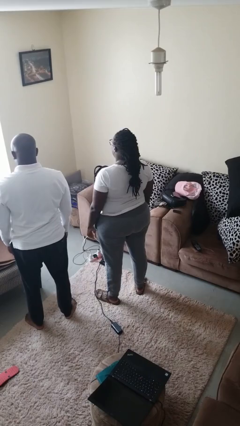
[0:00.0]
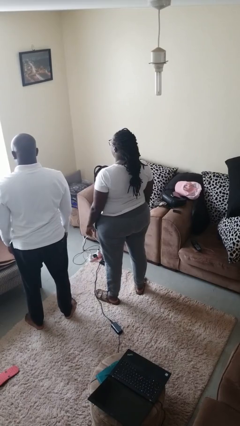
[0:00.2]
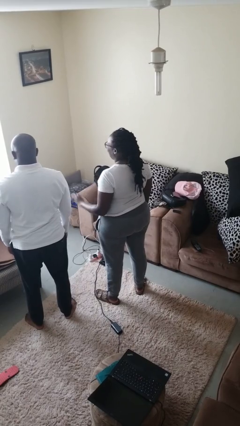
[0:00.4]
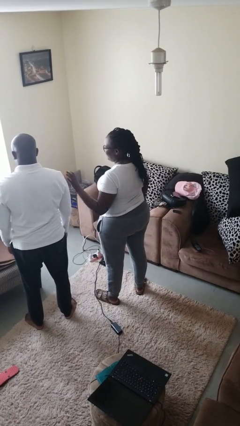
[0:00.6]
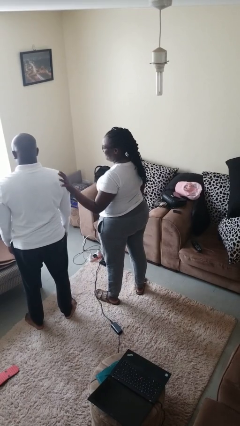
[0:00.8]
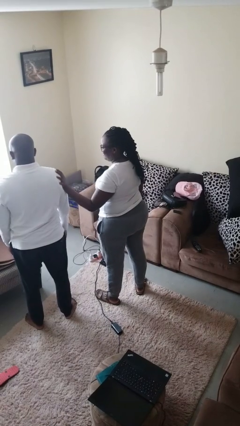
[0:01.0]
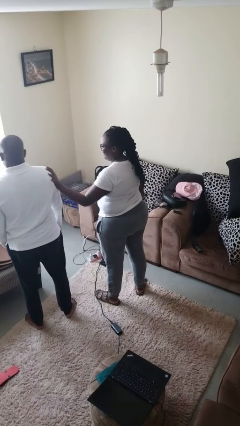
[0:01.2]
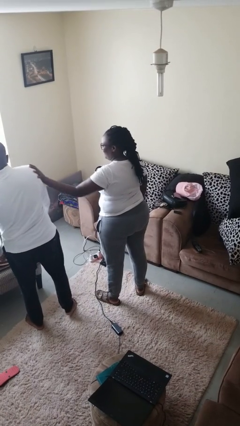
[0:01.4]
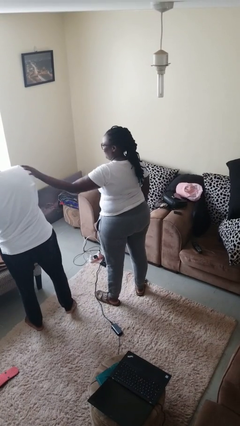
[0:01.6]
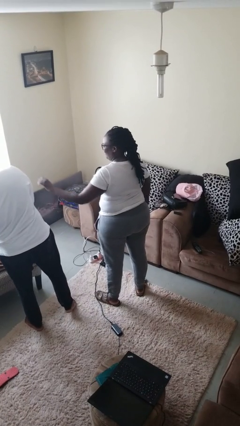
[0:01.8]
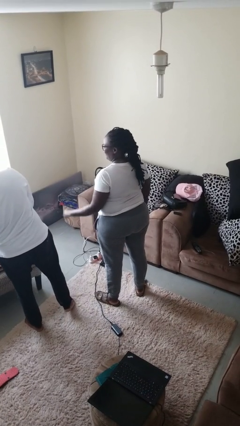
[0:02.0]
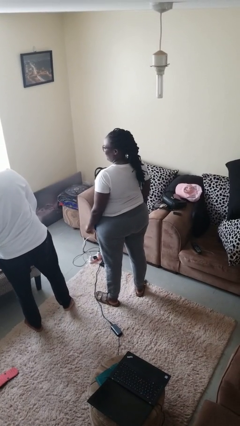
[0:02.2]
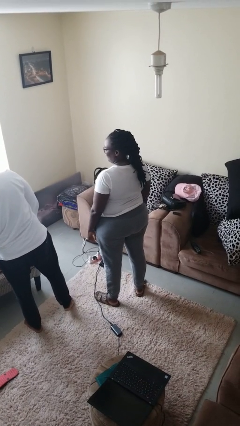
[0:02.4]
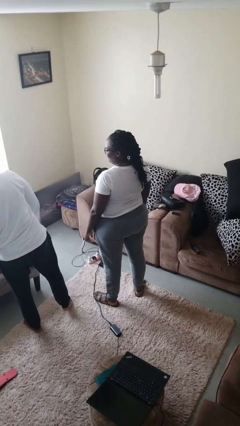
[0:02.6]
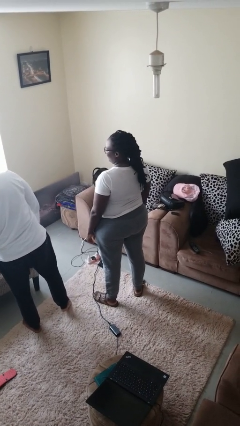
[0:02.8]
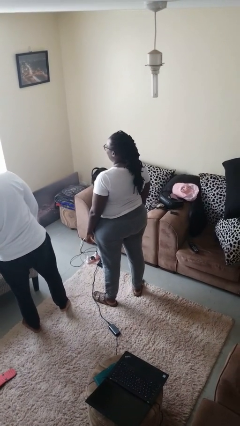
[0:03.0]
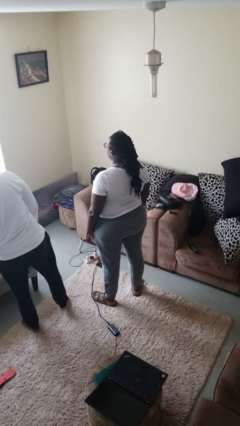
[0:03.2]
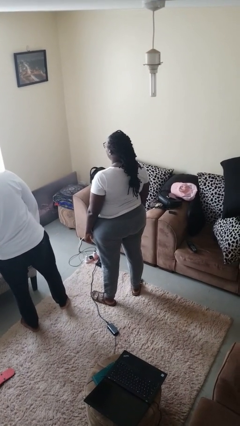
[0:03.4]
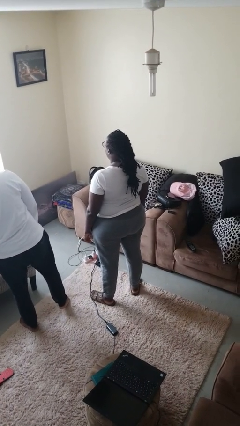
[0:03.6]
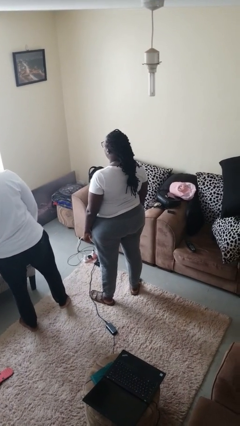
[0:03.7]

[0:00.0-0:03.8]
person shoves person

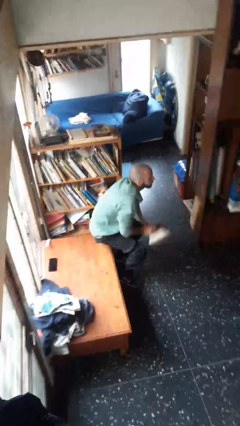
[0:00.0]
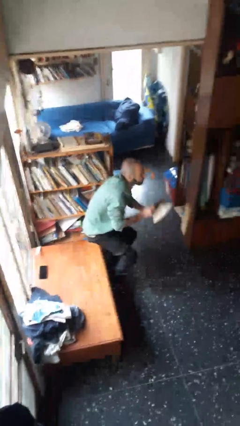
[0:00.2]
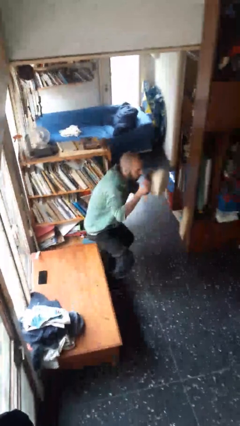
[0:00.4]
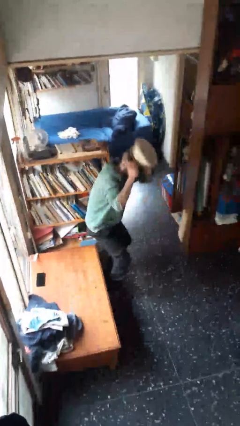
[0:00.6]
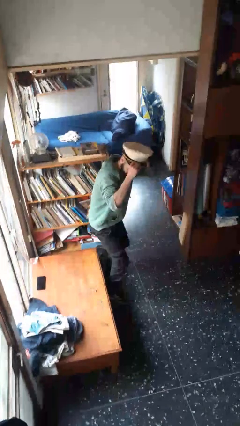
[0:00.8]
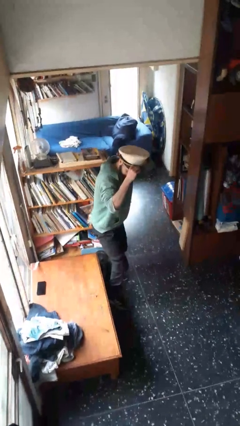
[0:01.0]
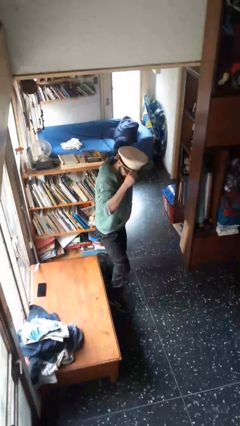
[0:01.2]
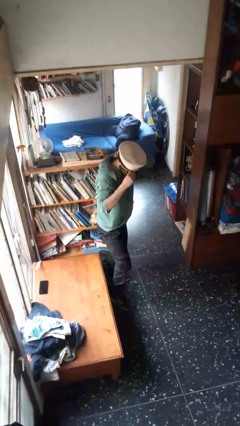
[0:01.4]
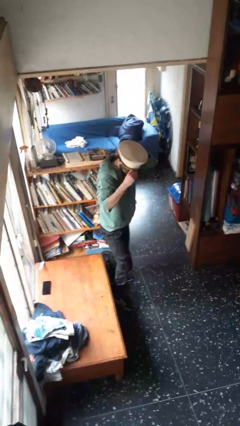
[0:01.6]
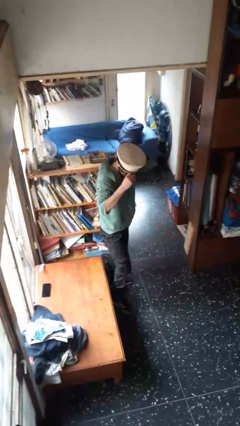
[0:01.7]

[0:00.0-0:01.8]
person puts on hat

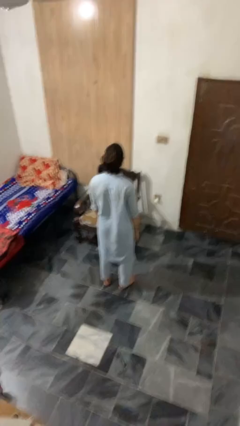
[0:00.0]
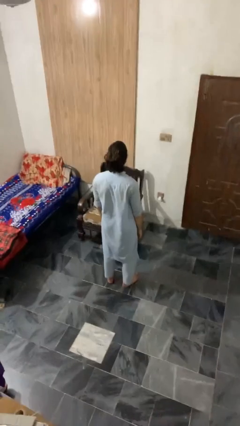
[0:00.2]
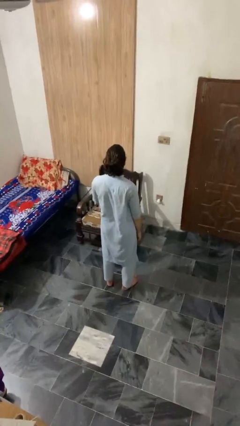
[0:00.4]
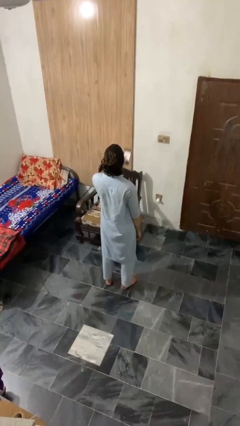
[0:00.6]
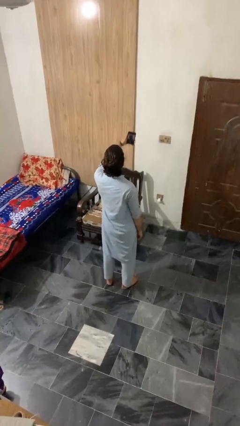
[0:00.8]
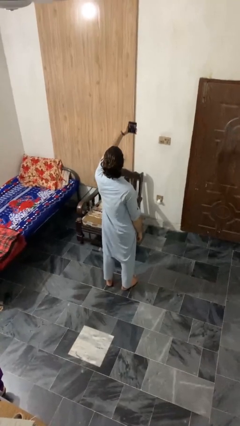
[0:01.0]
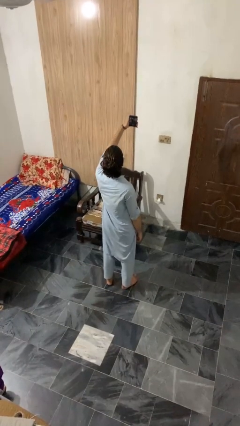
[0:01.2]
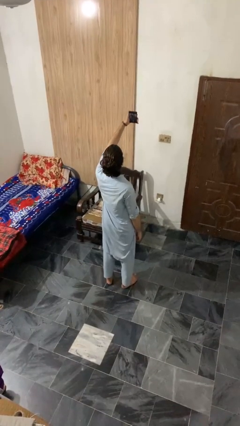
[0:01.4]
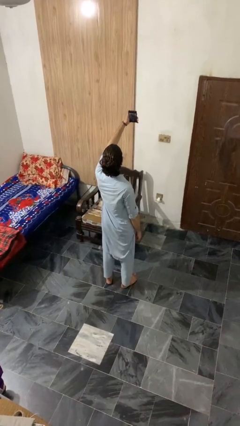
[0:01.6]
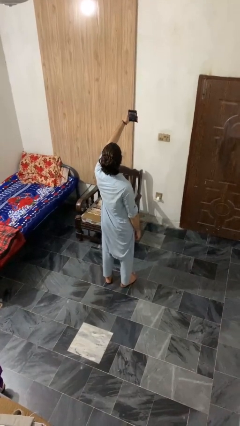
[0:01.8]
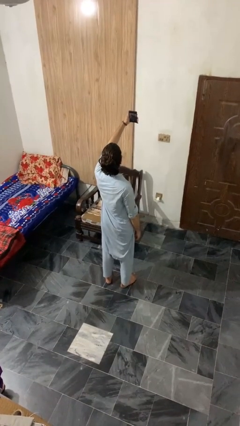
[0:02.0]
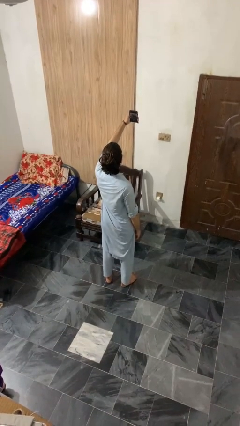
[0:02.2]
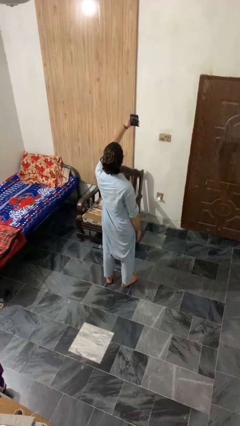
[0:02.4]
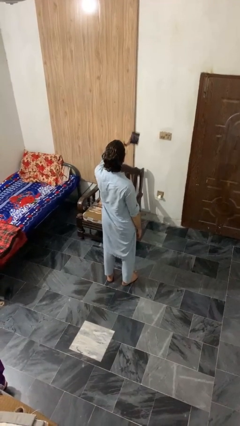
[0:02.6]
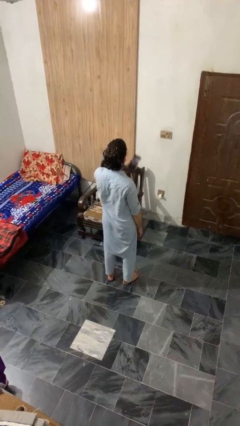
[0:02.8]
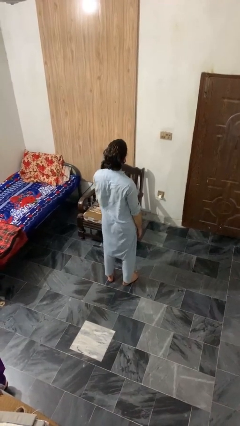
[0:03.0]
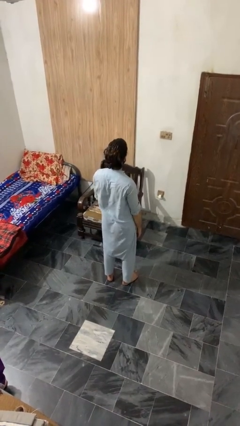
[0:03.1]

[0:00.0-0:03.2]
person takes selfie

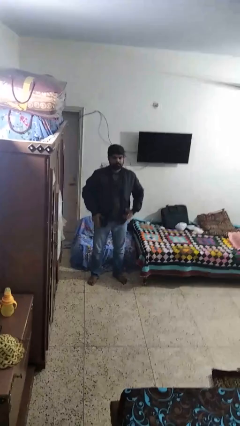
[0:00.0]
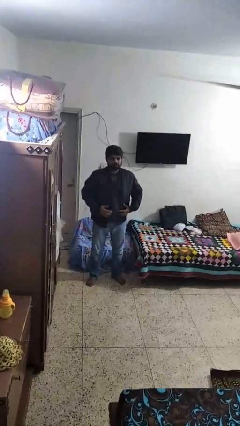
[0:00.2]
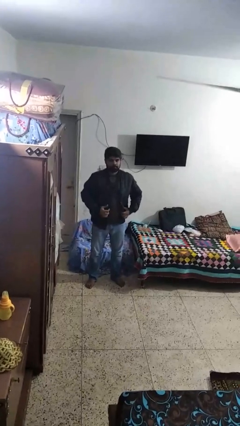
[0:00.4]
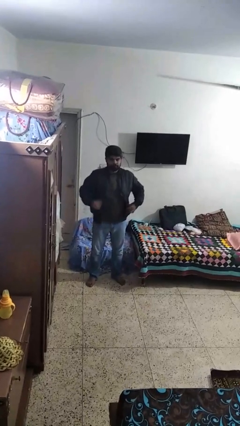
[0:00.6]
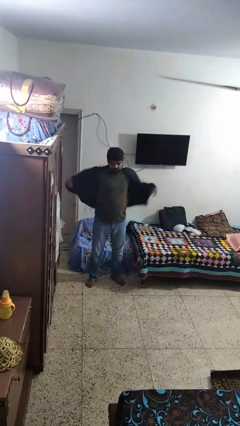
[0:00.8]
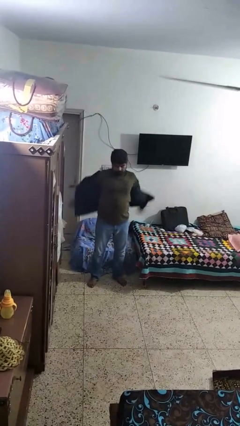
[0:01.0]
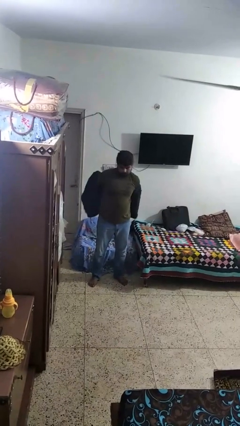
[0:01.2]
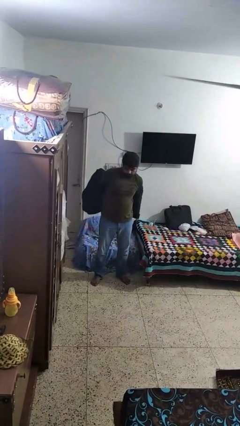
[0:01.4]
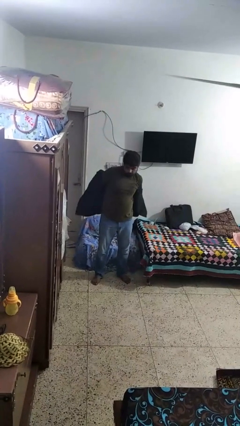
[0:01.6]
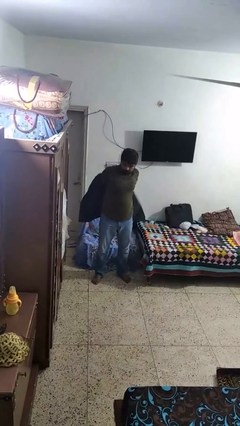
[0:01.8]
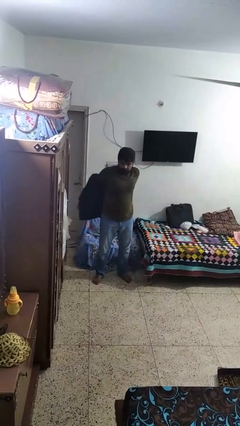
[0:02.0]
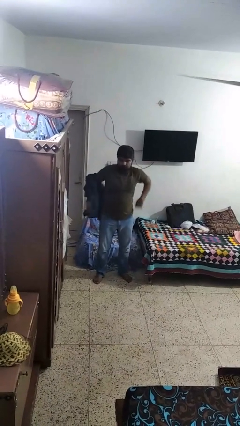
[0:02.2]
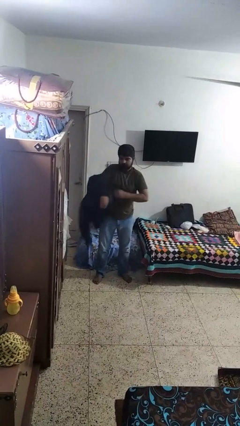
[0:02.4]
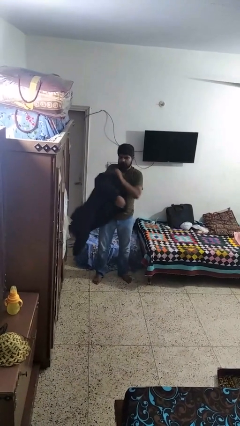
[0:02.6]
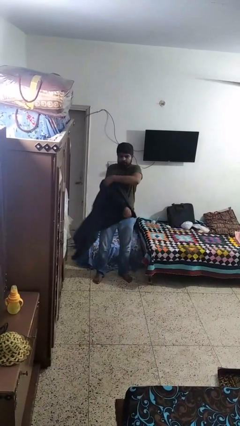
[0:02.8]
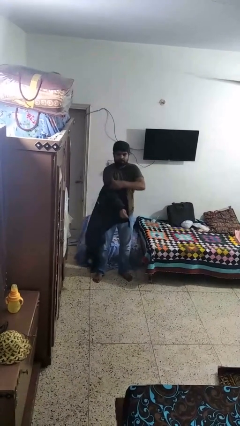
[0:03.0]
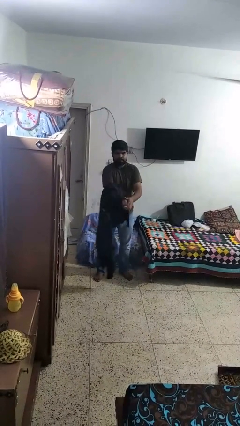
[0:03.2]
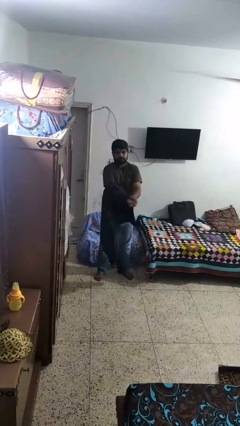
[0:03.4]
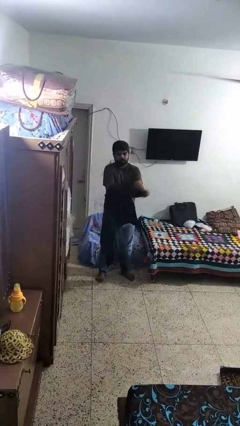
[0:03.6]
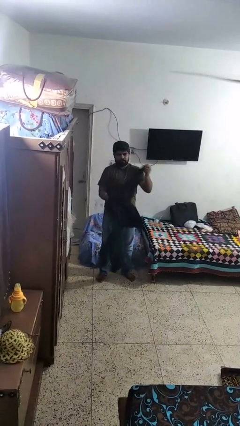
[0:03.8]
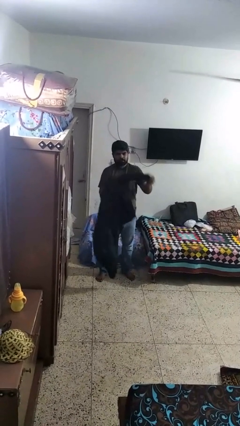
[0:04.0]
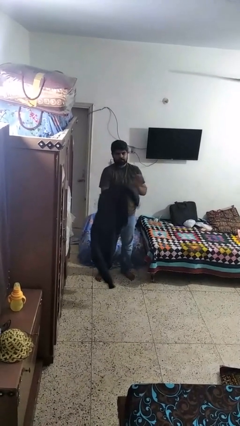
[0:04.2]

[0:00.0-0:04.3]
person takes off jacket

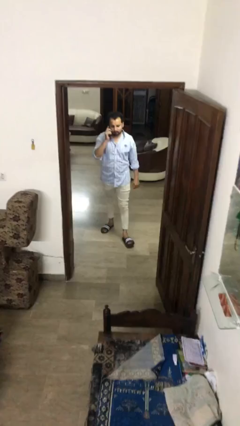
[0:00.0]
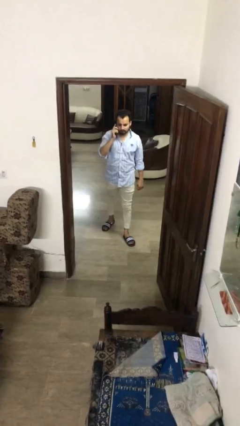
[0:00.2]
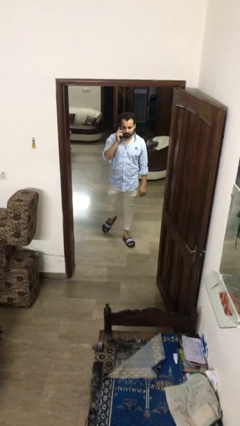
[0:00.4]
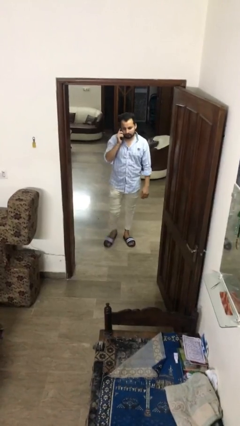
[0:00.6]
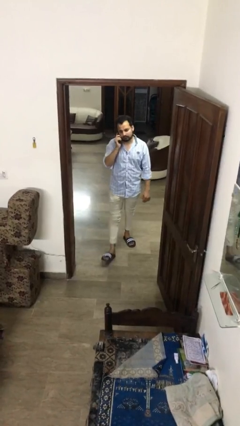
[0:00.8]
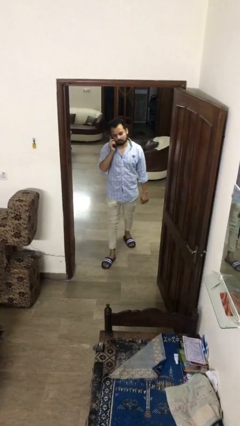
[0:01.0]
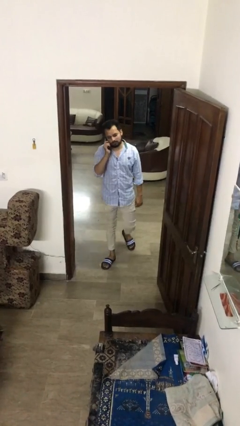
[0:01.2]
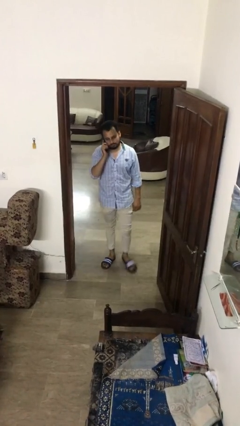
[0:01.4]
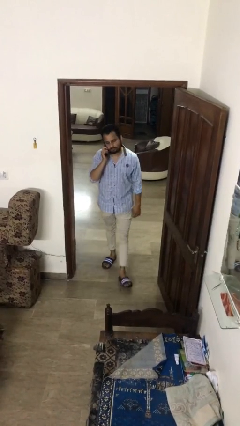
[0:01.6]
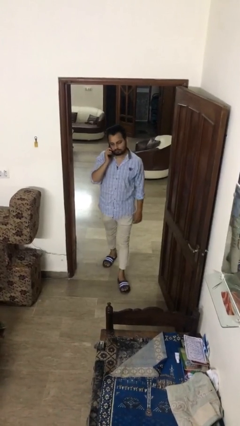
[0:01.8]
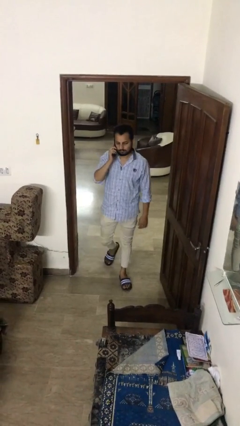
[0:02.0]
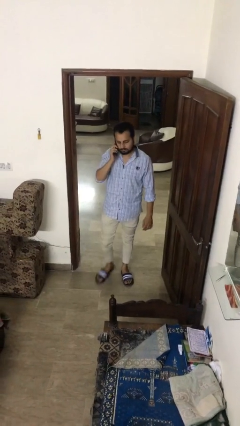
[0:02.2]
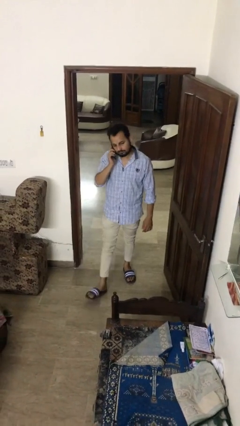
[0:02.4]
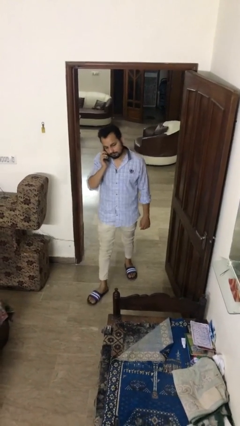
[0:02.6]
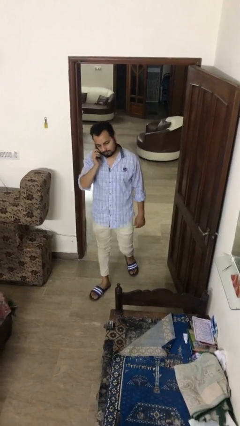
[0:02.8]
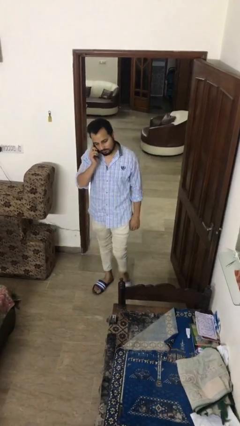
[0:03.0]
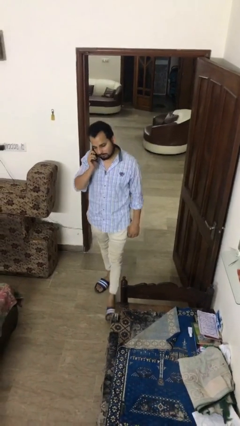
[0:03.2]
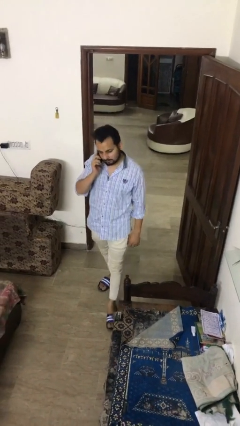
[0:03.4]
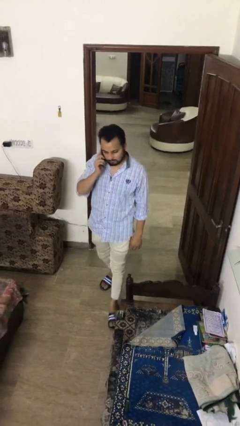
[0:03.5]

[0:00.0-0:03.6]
person enters scene through structure

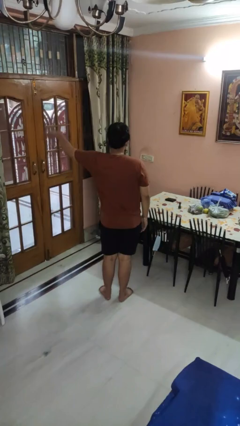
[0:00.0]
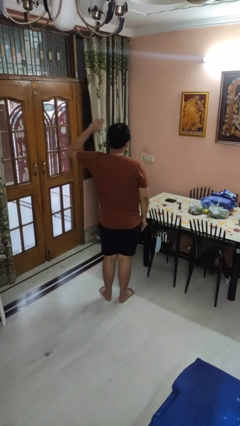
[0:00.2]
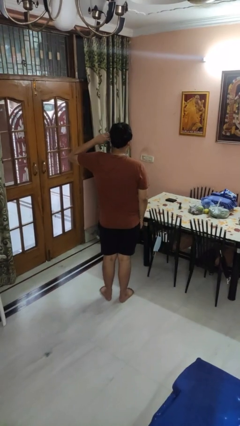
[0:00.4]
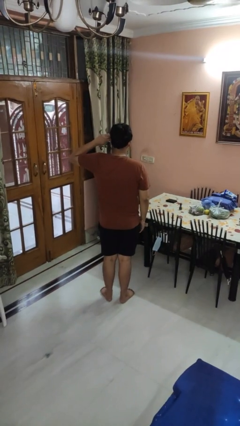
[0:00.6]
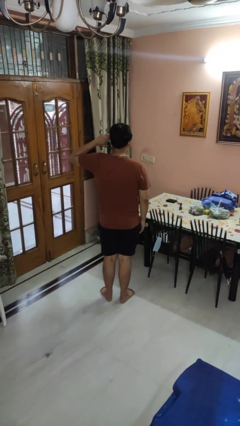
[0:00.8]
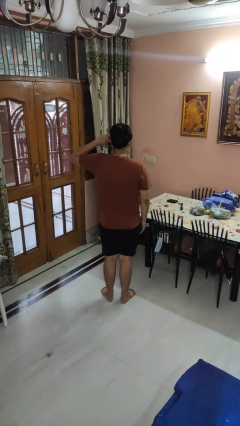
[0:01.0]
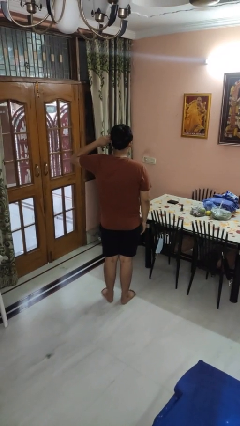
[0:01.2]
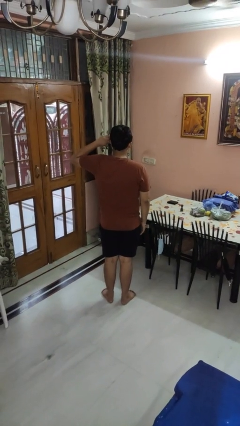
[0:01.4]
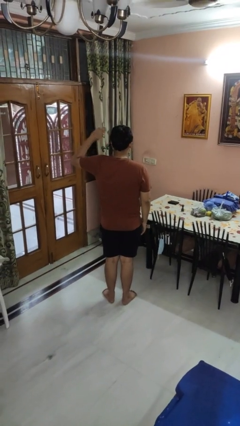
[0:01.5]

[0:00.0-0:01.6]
person salutes
